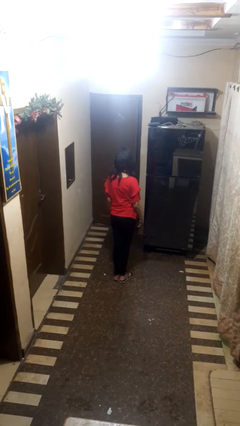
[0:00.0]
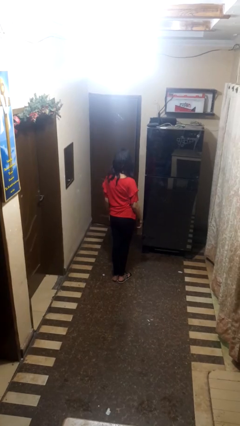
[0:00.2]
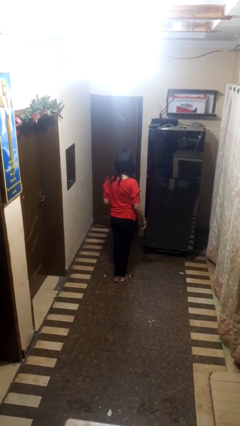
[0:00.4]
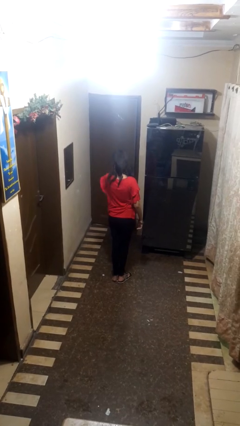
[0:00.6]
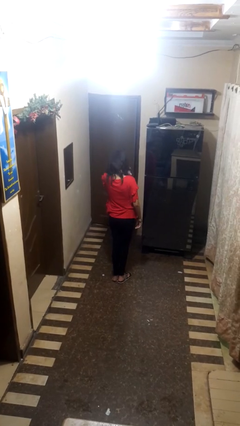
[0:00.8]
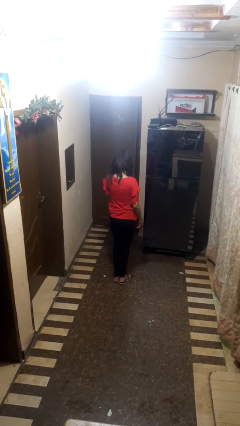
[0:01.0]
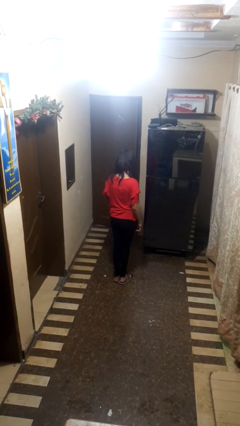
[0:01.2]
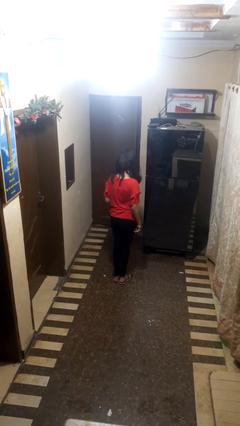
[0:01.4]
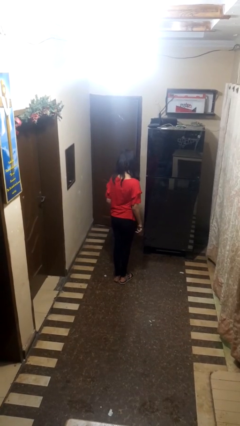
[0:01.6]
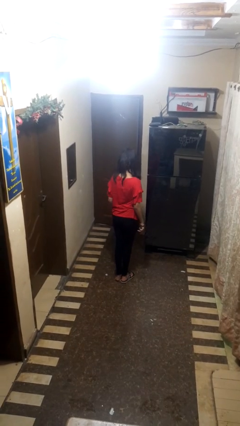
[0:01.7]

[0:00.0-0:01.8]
person sneezes into arm

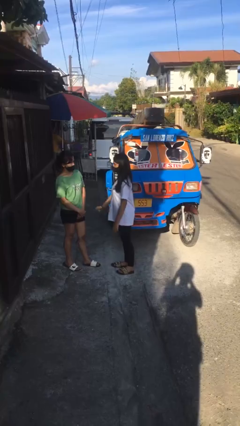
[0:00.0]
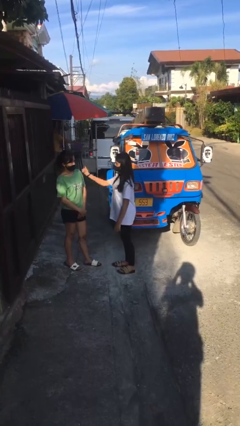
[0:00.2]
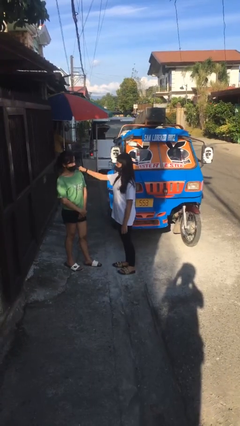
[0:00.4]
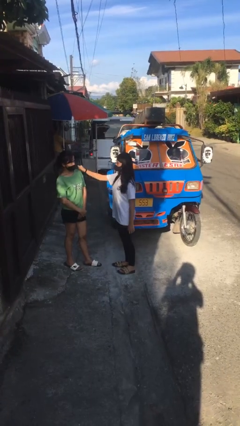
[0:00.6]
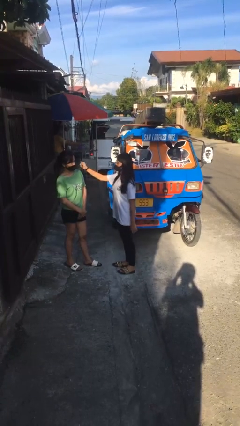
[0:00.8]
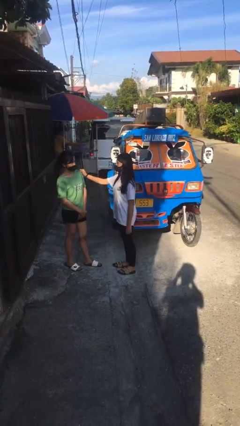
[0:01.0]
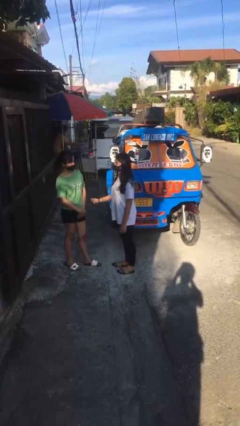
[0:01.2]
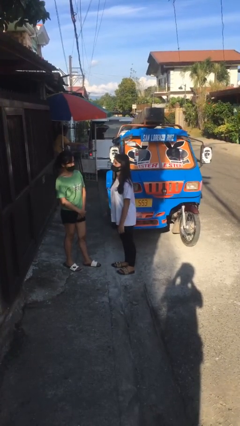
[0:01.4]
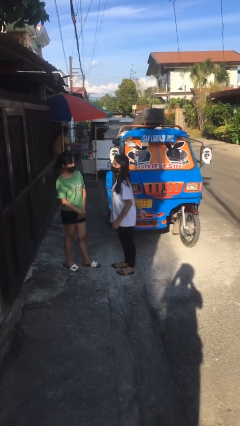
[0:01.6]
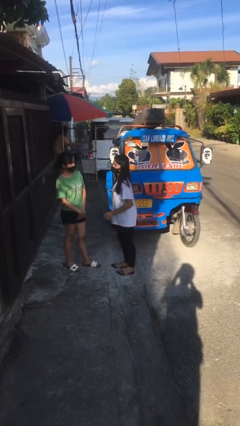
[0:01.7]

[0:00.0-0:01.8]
person pounds shoulders of person

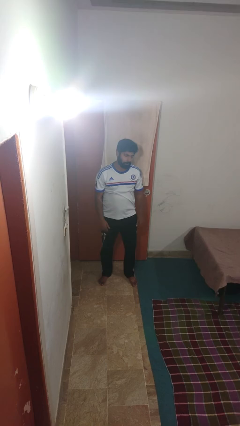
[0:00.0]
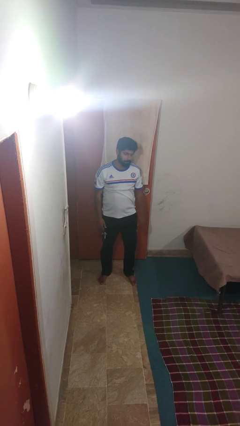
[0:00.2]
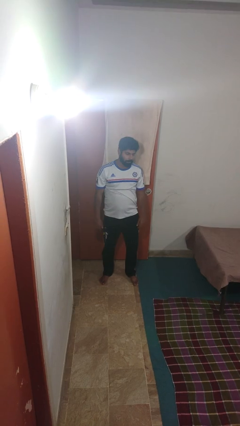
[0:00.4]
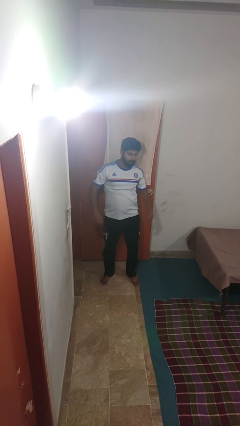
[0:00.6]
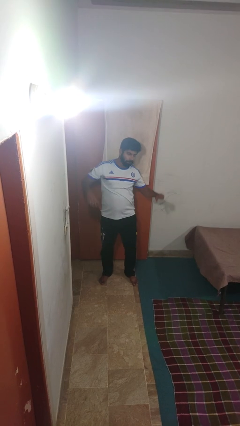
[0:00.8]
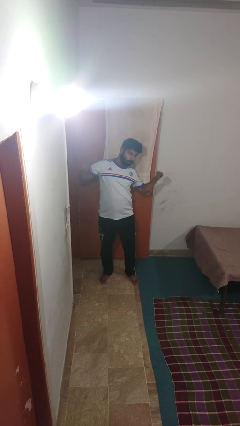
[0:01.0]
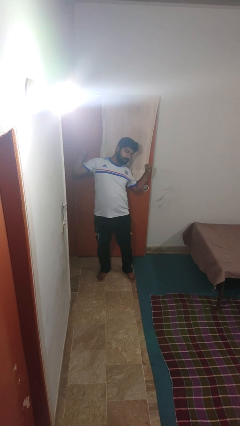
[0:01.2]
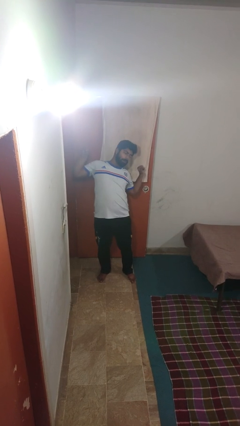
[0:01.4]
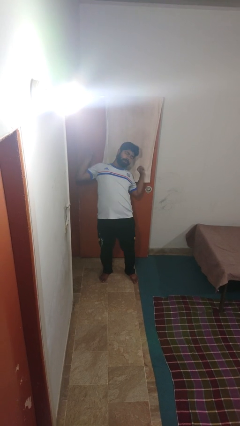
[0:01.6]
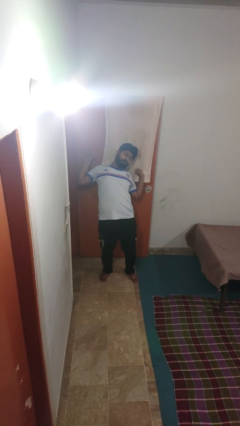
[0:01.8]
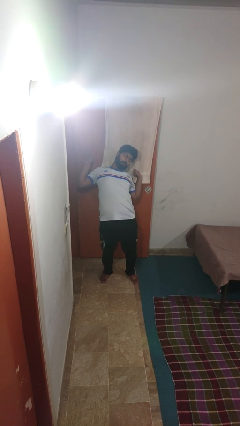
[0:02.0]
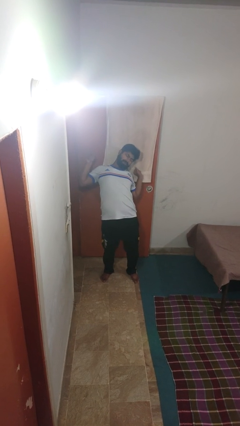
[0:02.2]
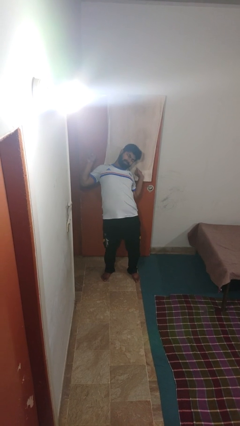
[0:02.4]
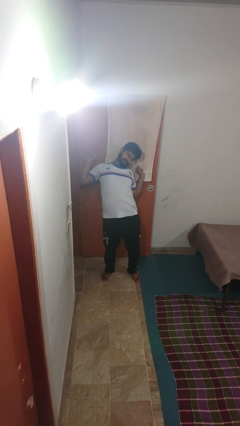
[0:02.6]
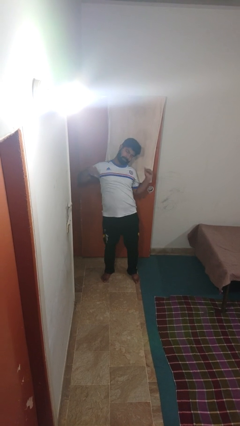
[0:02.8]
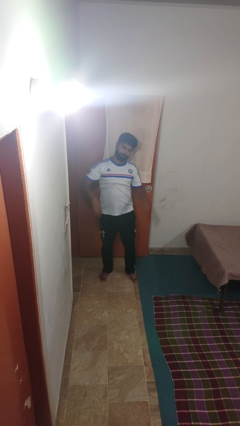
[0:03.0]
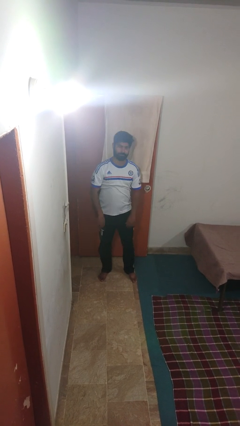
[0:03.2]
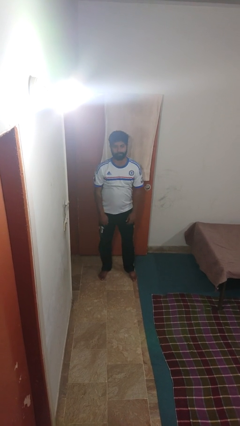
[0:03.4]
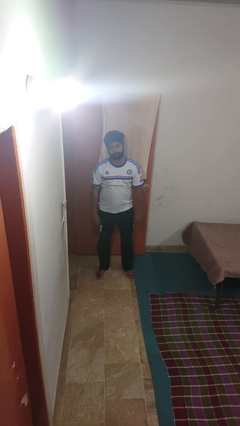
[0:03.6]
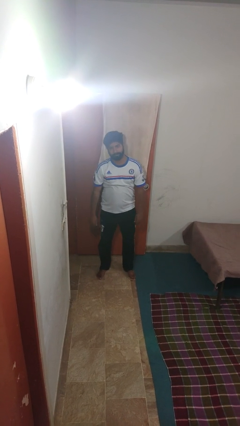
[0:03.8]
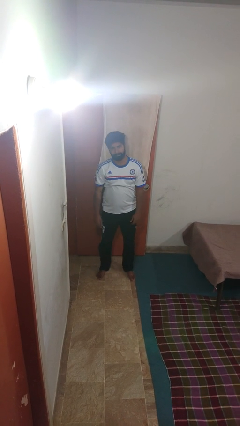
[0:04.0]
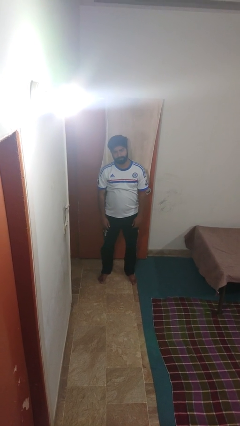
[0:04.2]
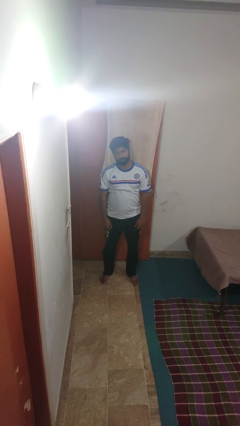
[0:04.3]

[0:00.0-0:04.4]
person stretches arms to side

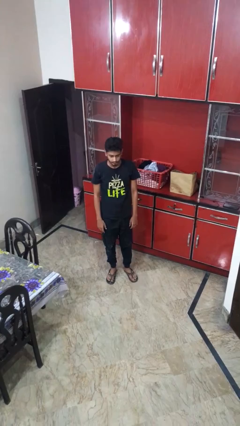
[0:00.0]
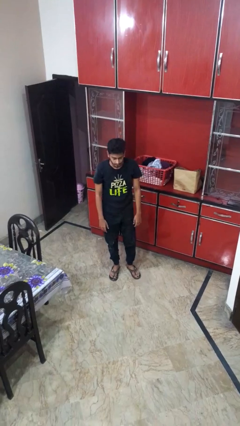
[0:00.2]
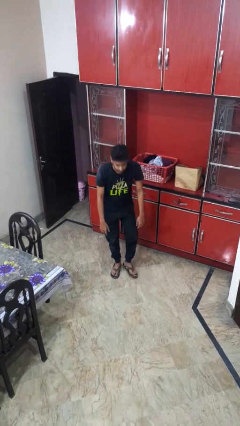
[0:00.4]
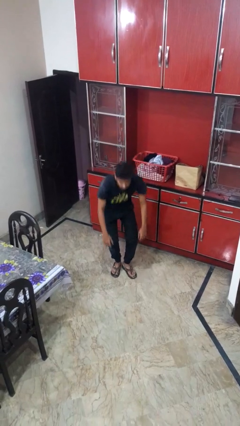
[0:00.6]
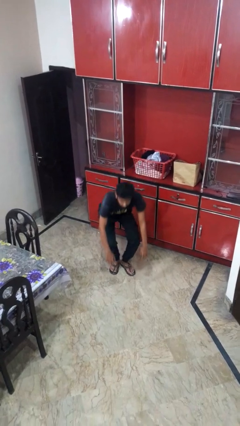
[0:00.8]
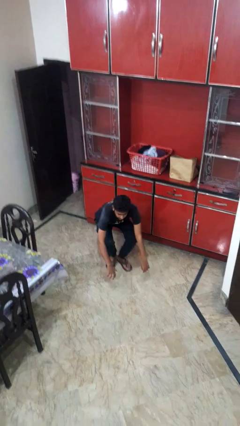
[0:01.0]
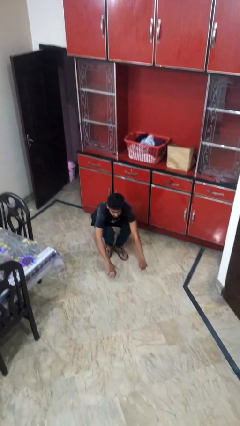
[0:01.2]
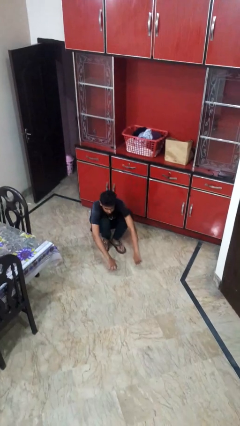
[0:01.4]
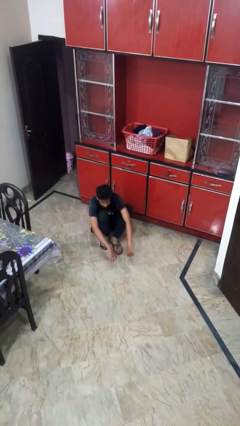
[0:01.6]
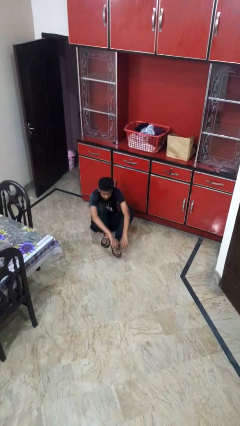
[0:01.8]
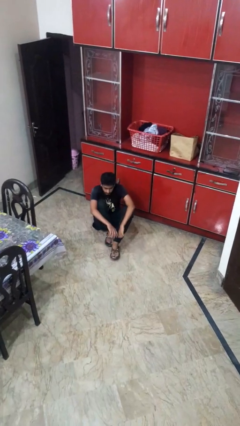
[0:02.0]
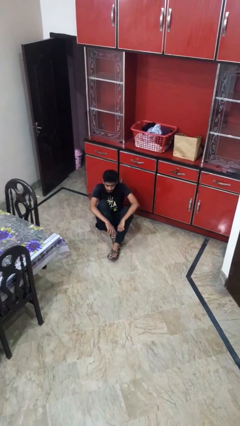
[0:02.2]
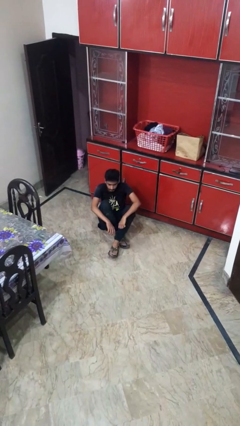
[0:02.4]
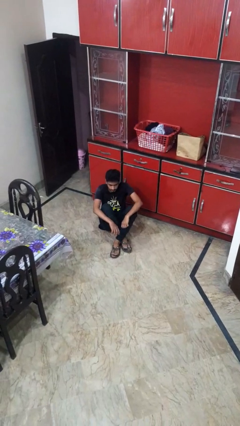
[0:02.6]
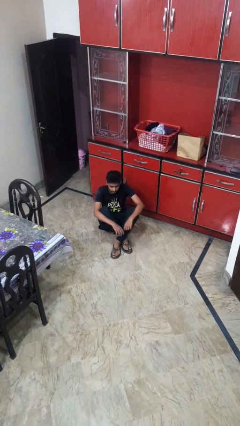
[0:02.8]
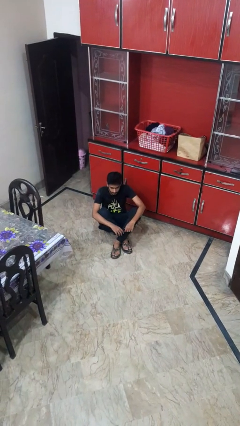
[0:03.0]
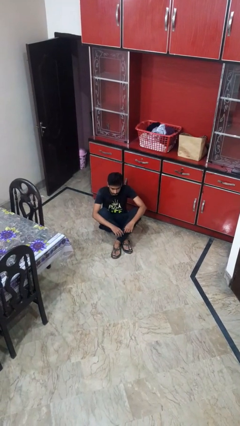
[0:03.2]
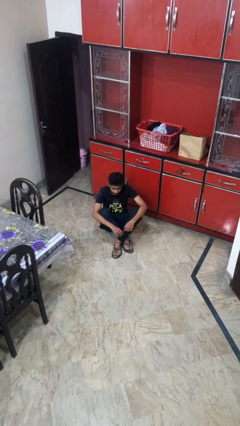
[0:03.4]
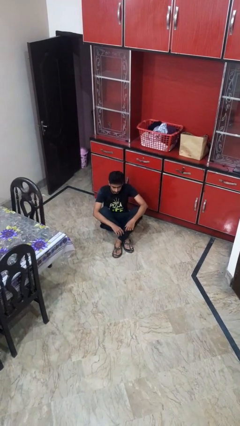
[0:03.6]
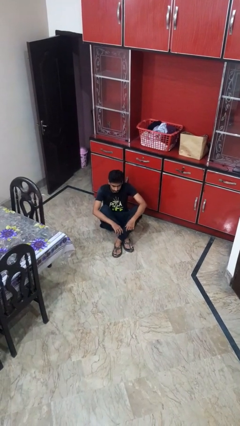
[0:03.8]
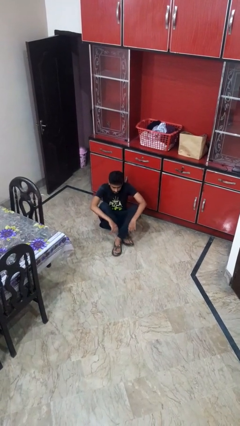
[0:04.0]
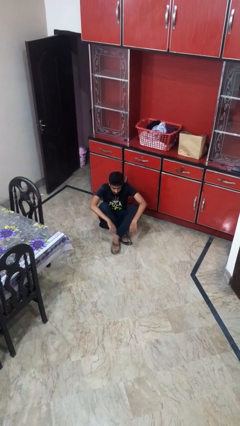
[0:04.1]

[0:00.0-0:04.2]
person sits crisscross

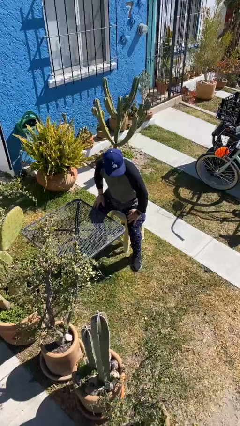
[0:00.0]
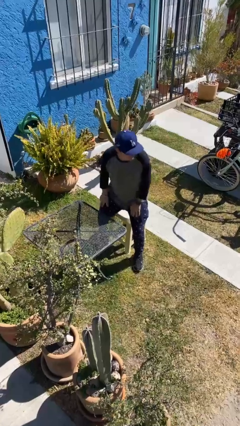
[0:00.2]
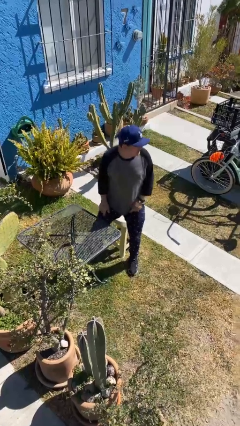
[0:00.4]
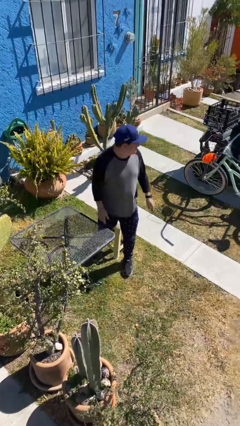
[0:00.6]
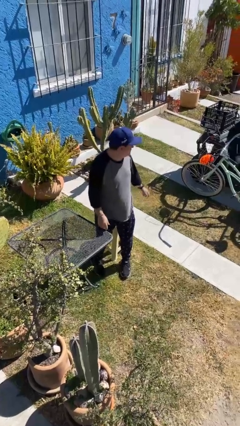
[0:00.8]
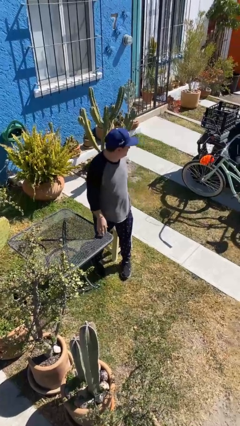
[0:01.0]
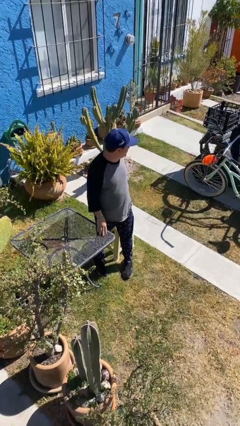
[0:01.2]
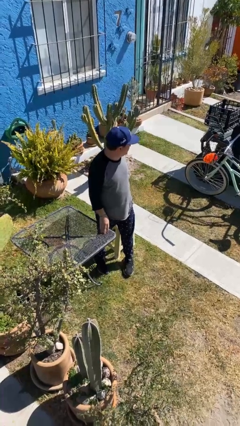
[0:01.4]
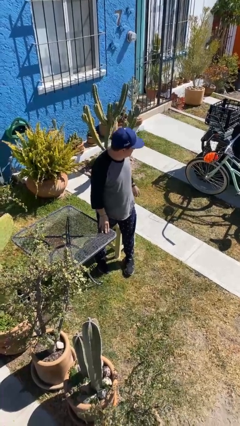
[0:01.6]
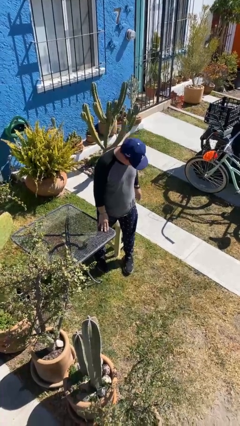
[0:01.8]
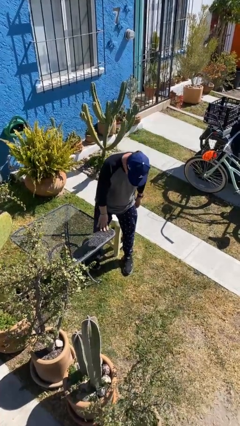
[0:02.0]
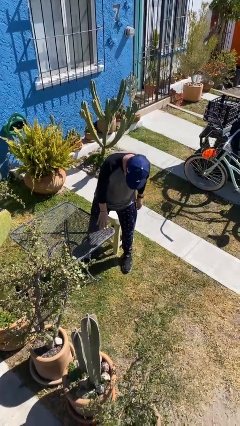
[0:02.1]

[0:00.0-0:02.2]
person stands up

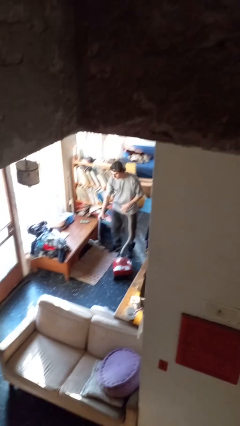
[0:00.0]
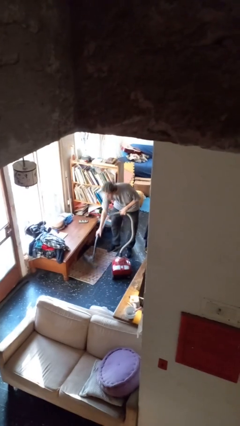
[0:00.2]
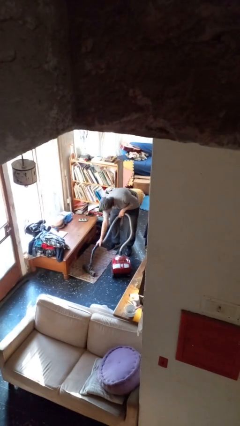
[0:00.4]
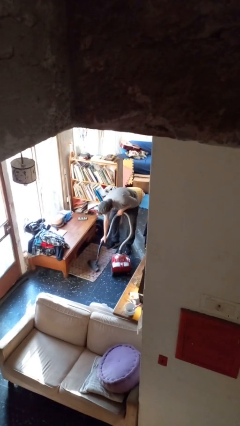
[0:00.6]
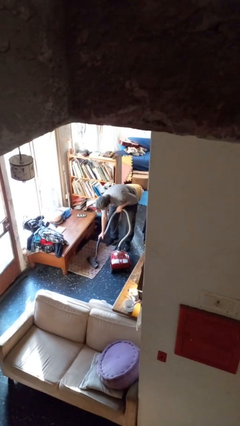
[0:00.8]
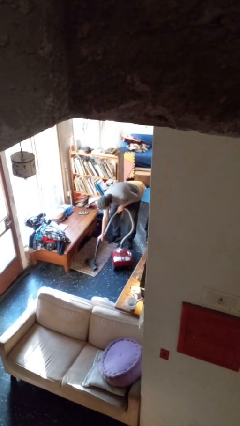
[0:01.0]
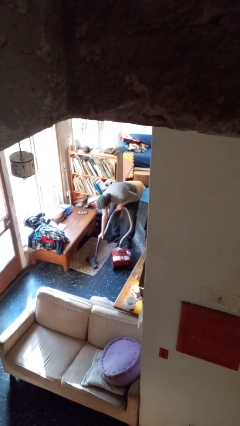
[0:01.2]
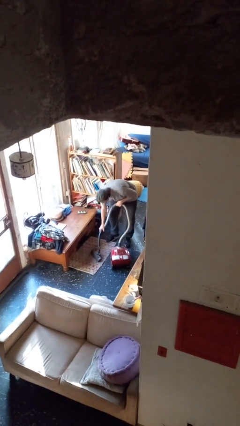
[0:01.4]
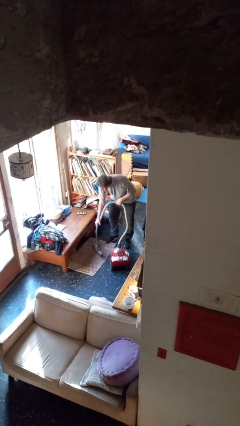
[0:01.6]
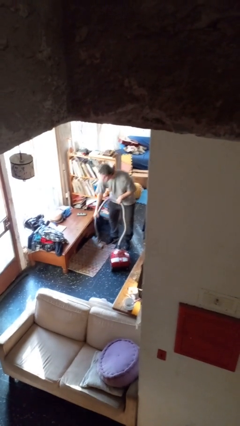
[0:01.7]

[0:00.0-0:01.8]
person vacuums carpet

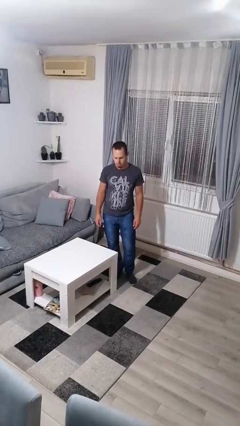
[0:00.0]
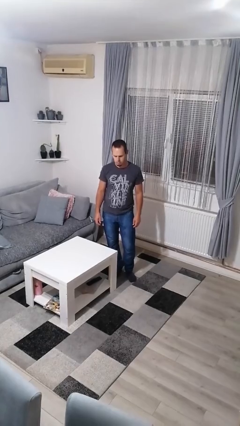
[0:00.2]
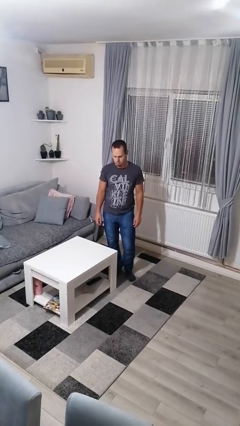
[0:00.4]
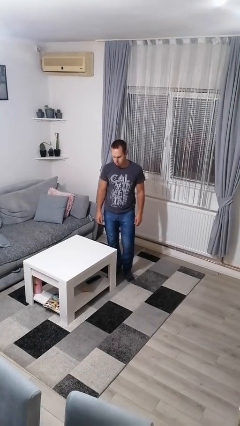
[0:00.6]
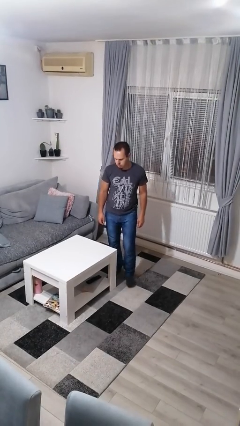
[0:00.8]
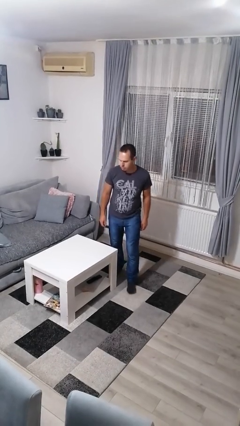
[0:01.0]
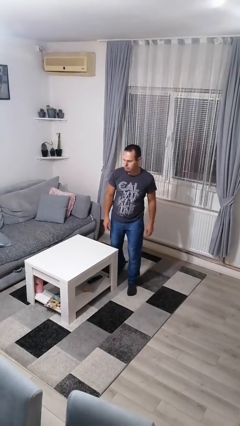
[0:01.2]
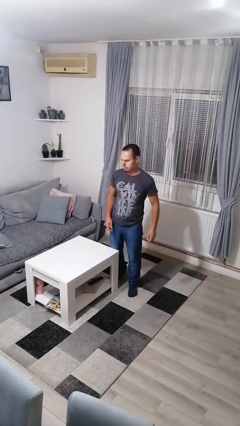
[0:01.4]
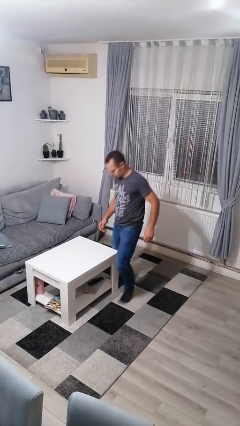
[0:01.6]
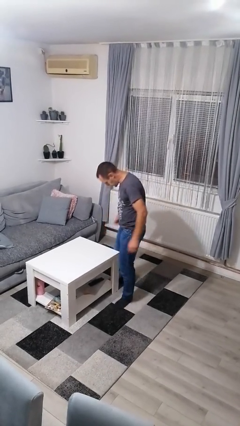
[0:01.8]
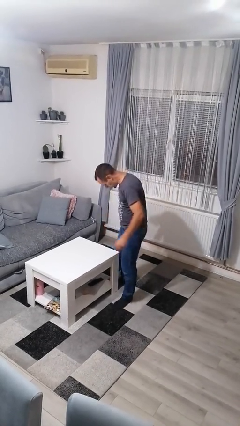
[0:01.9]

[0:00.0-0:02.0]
person bumps into table
